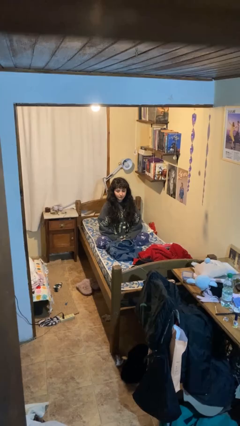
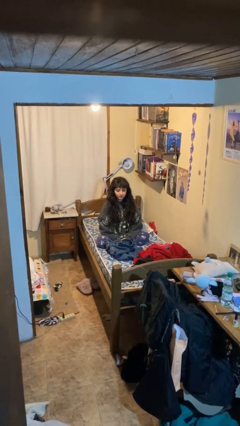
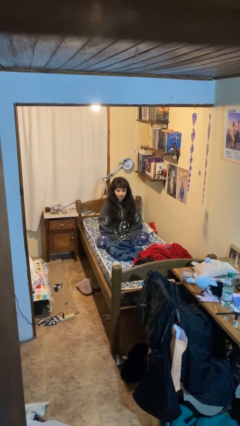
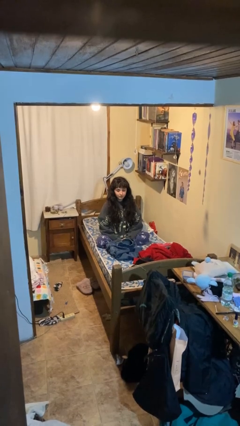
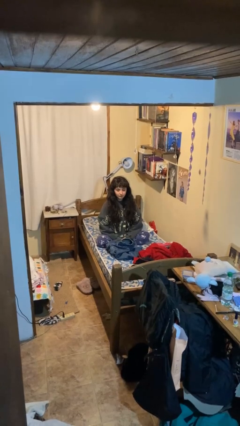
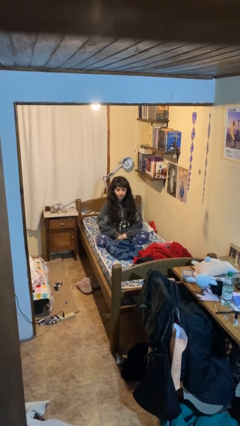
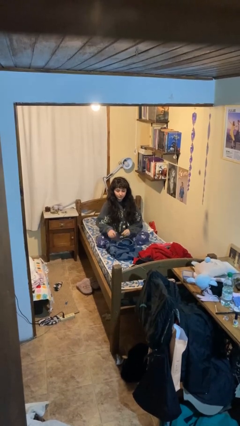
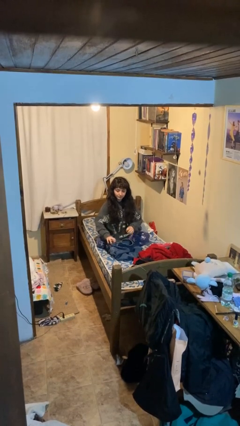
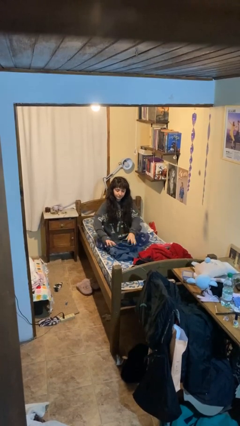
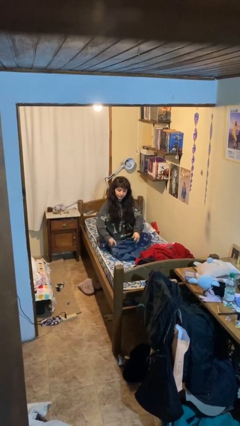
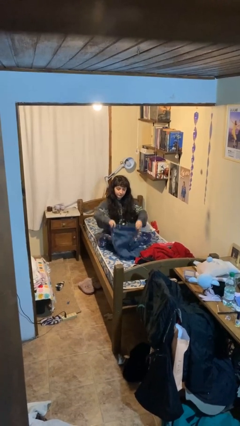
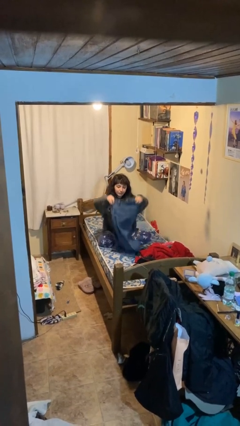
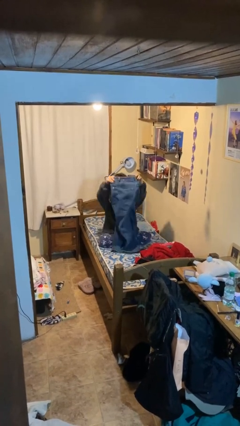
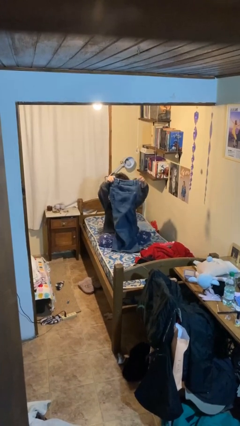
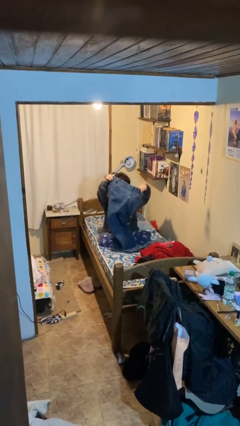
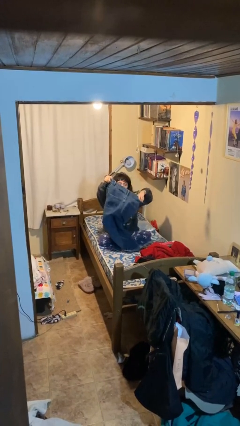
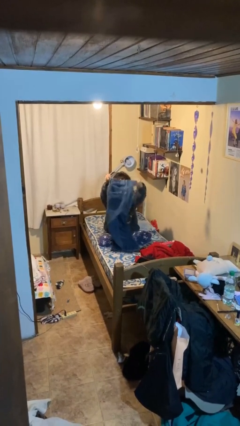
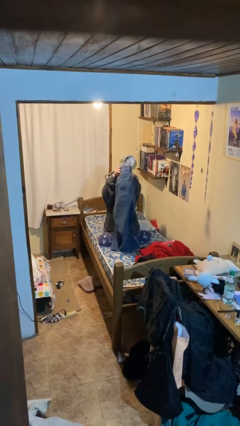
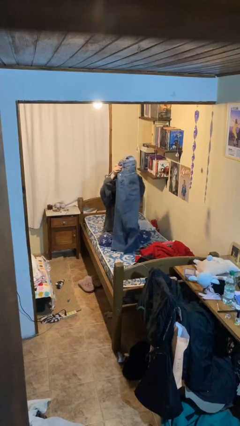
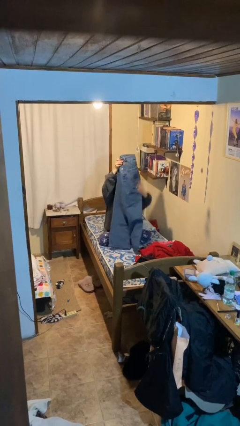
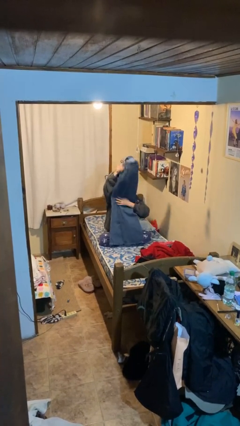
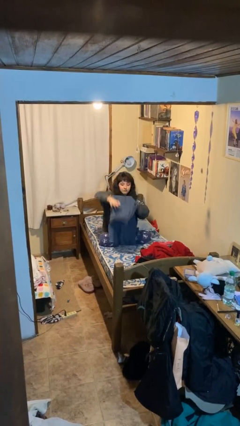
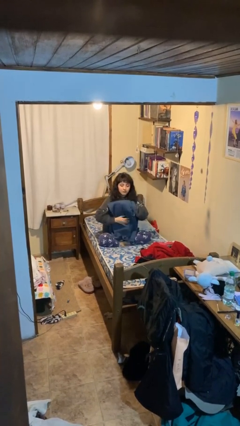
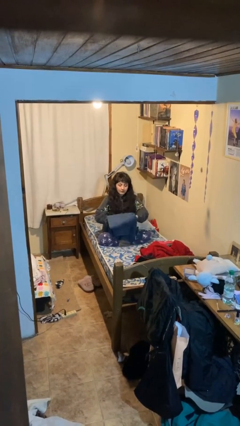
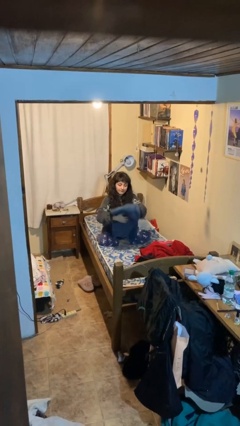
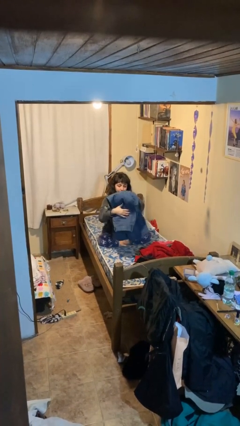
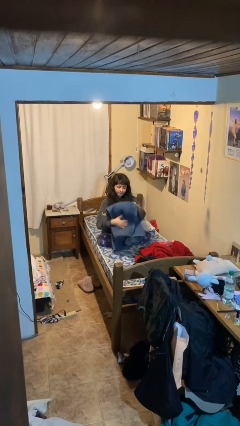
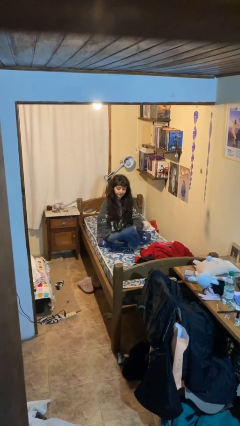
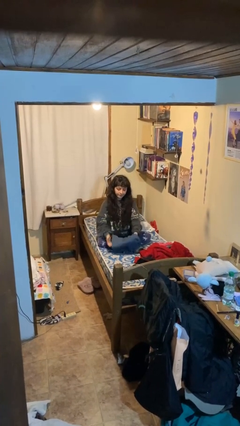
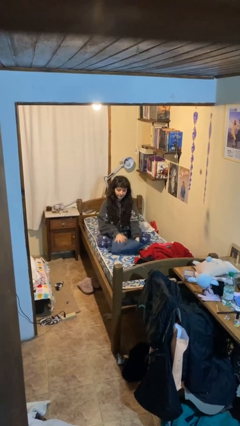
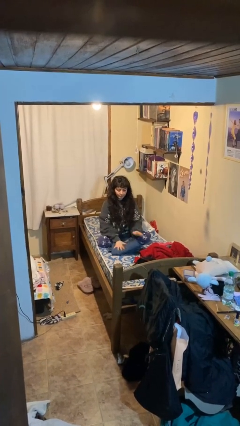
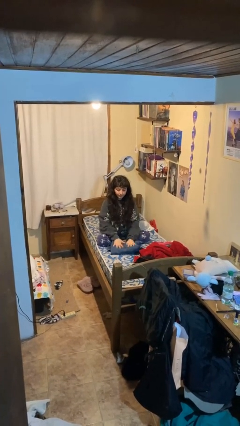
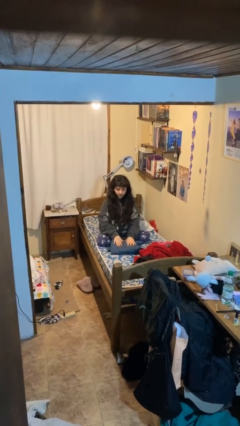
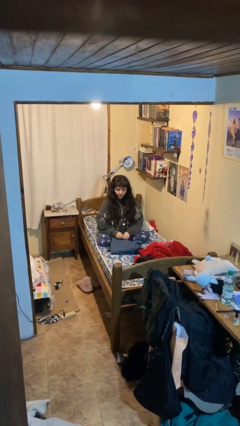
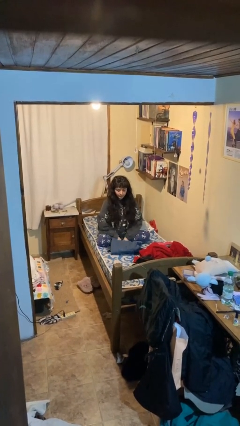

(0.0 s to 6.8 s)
person folds pants

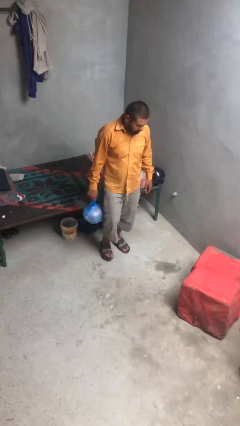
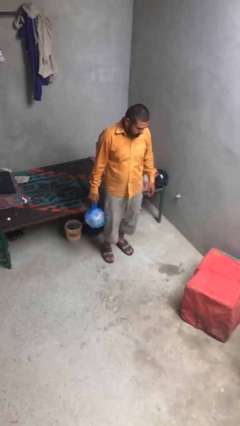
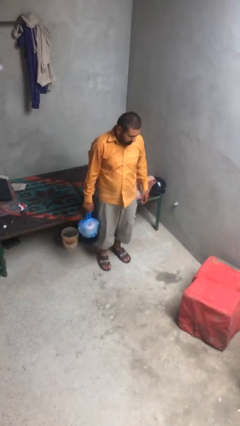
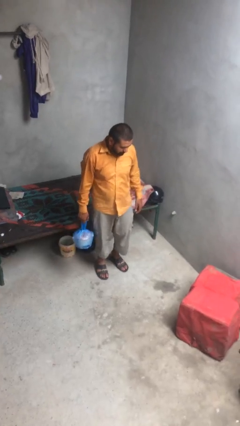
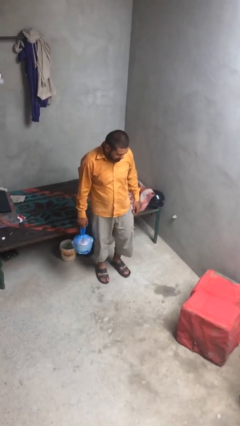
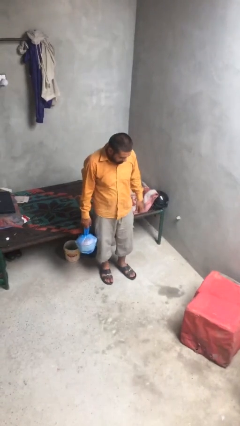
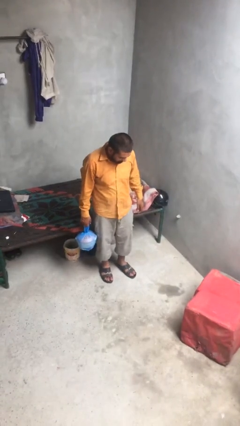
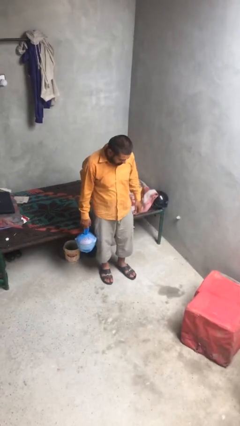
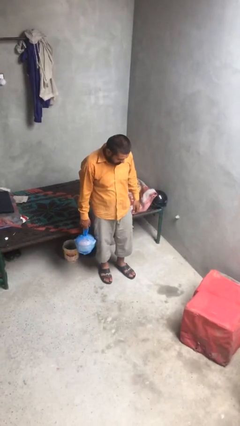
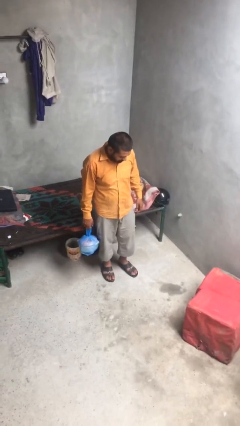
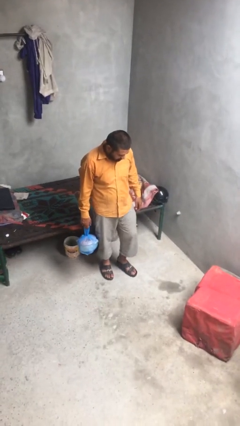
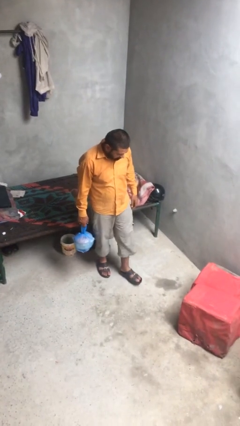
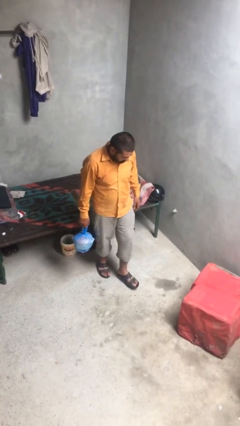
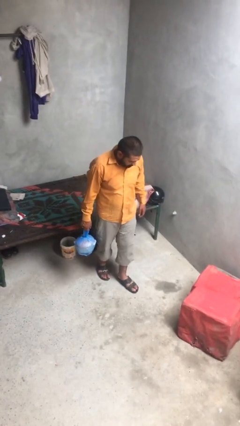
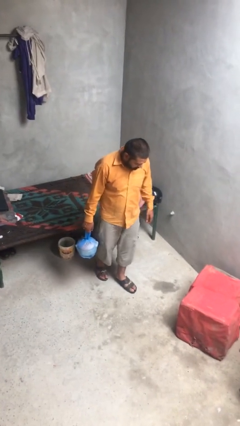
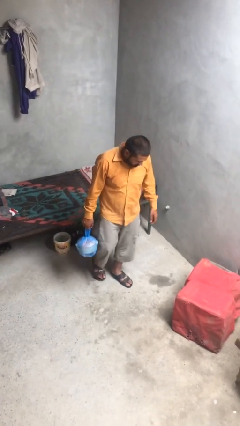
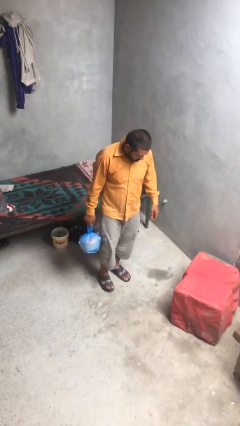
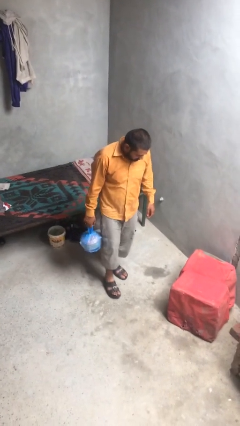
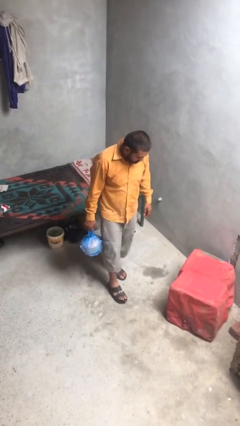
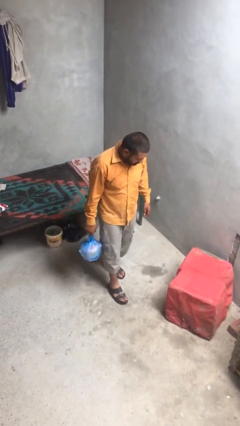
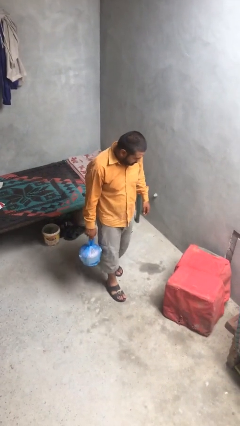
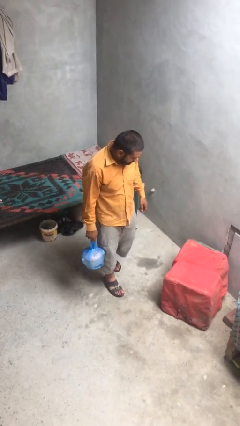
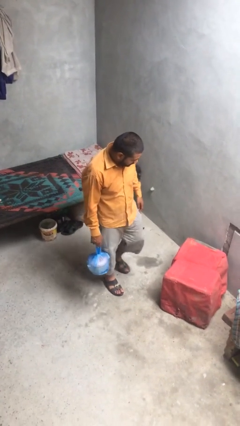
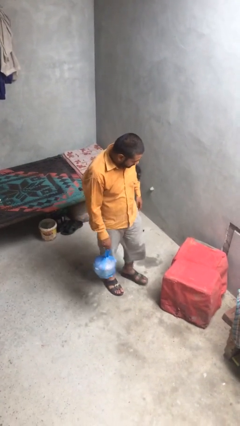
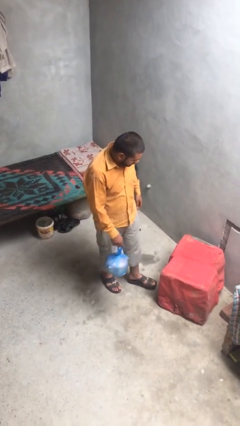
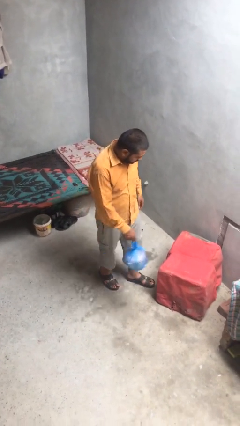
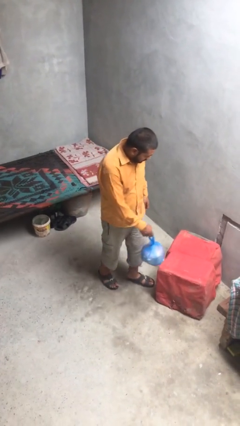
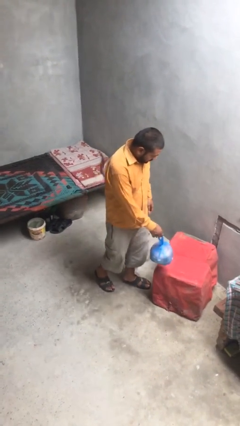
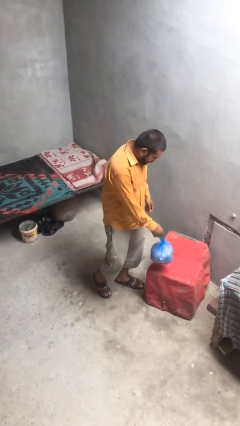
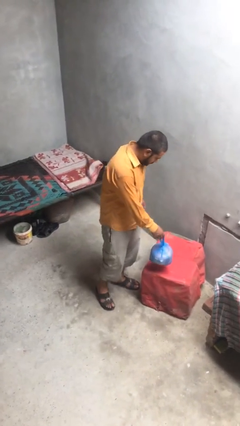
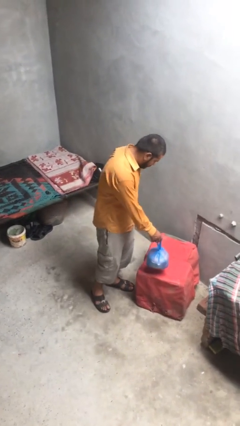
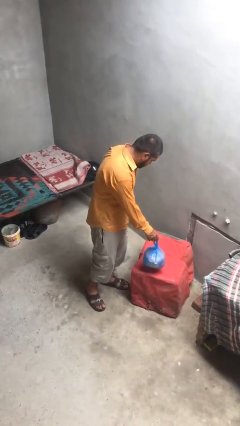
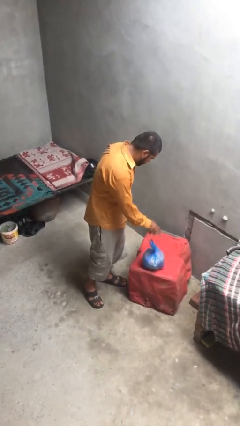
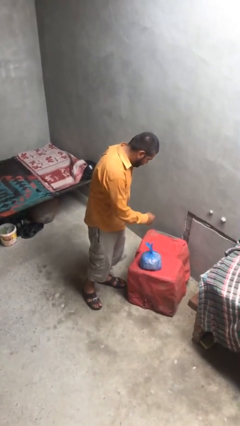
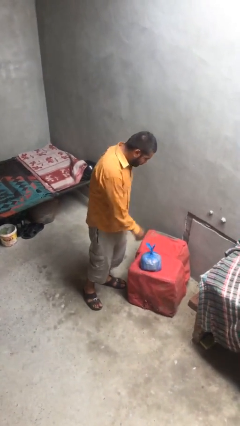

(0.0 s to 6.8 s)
person puts down object on table

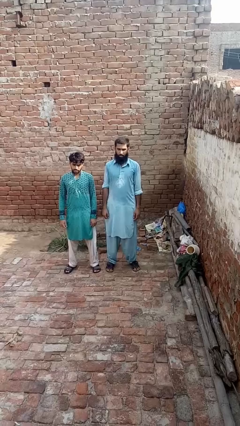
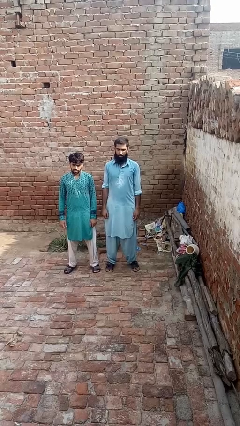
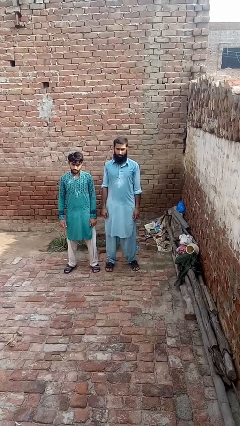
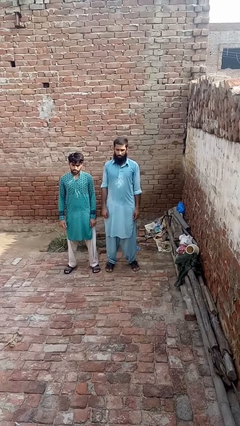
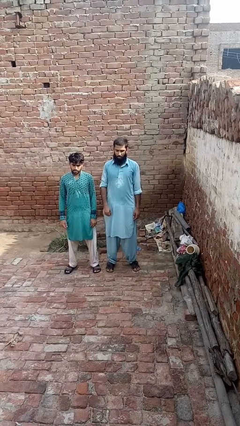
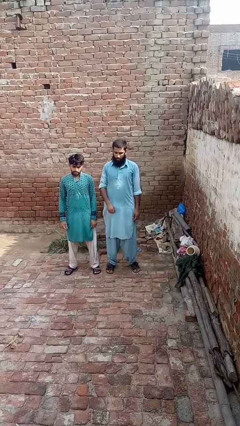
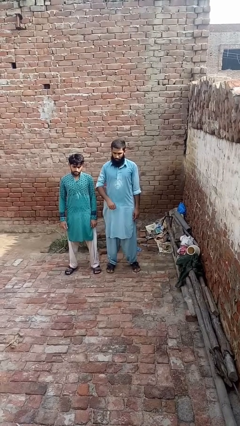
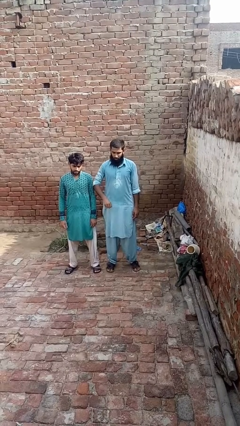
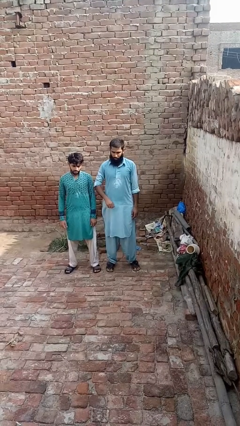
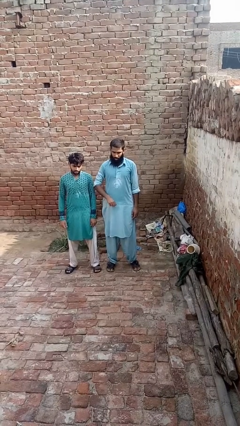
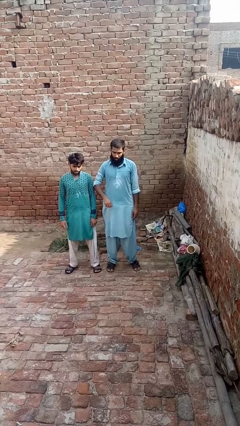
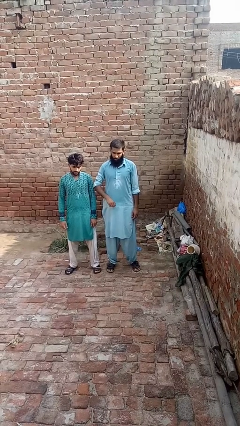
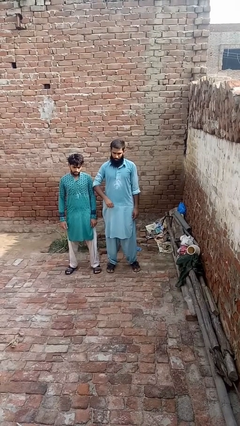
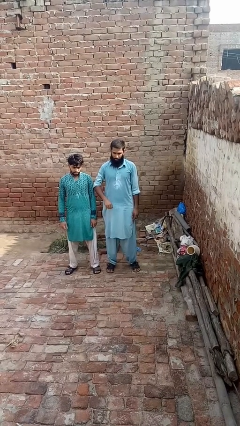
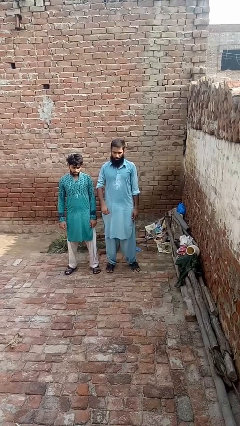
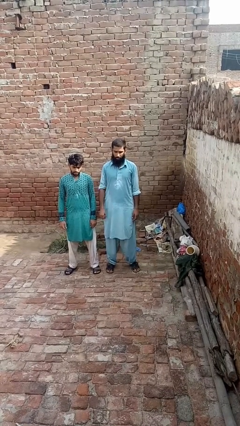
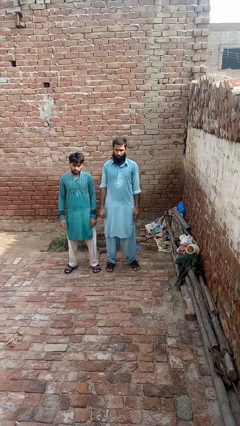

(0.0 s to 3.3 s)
person nudges person with elbow

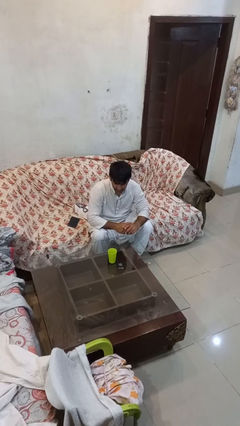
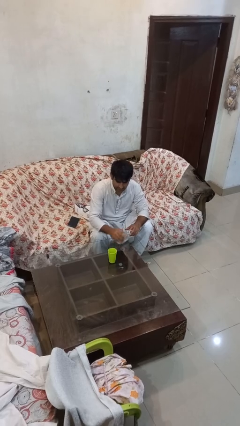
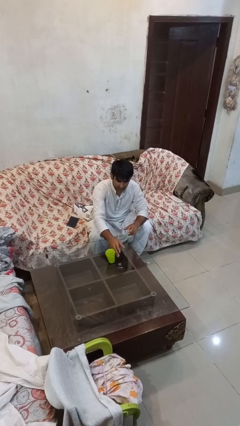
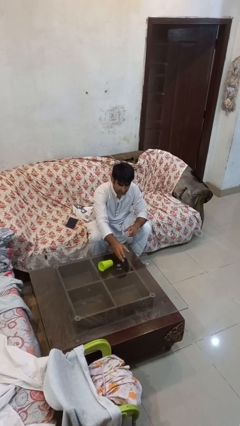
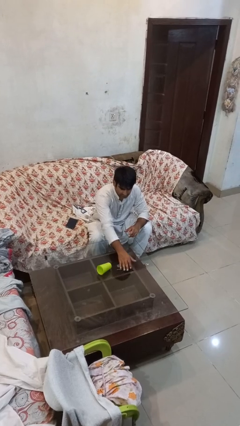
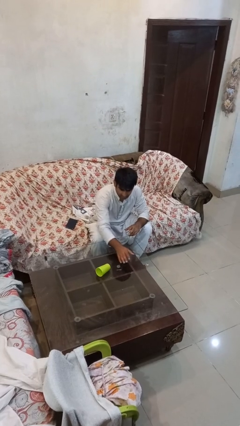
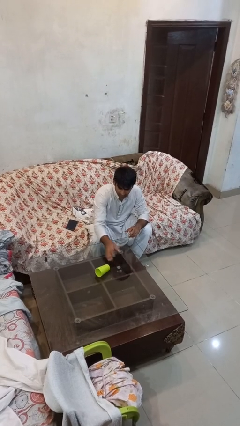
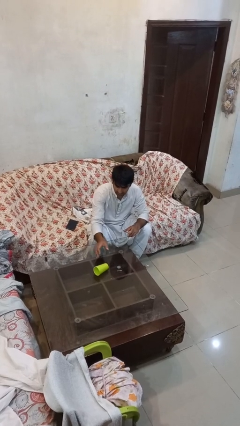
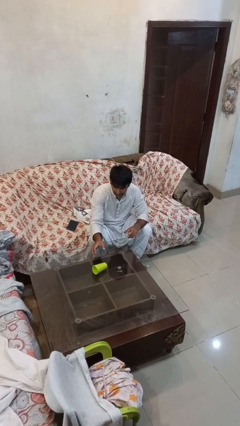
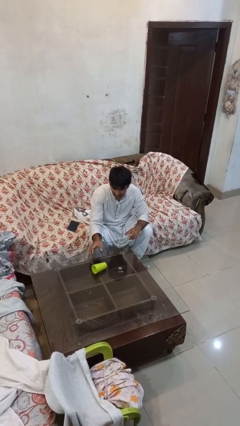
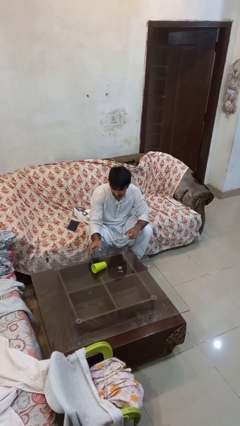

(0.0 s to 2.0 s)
person knocks over glass
